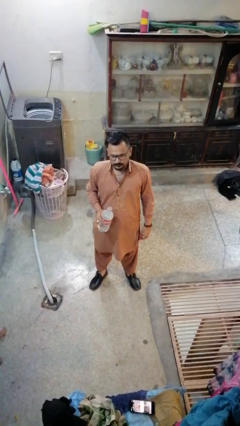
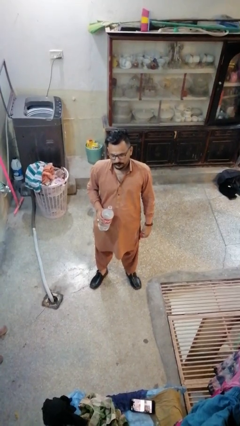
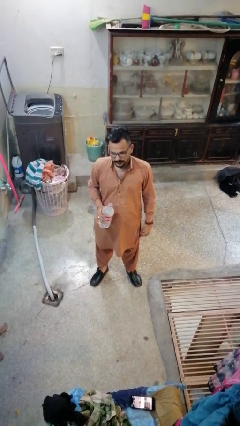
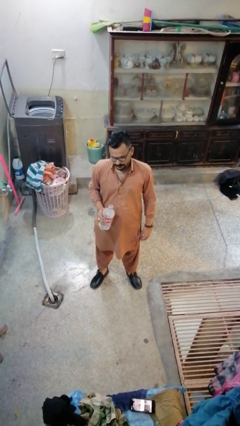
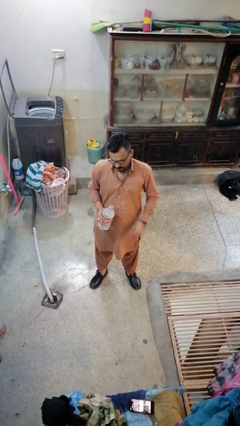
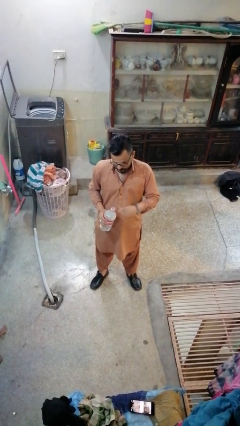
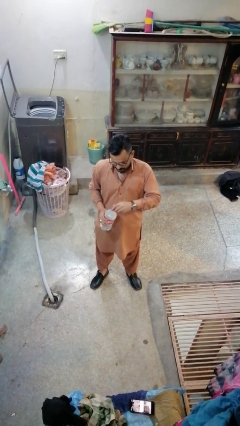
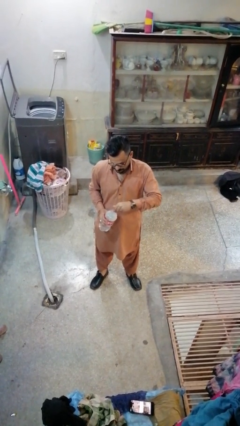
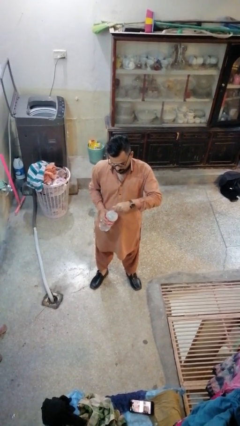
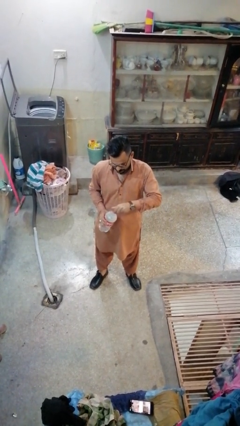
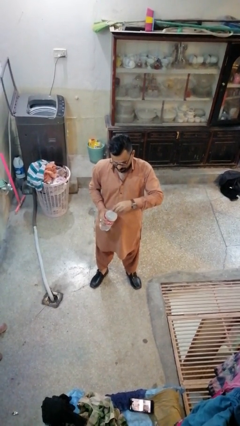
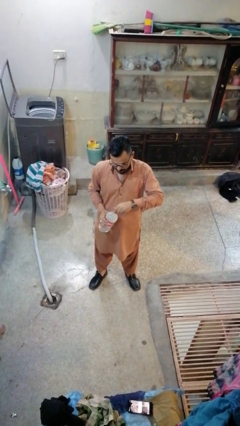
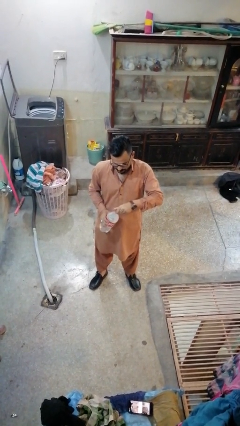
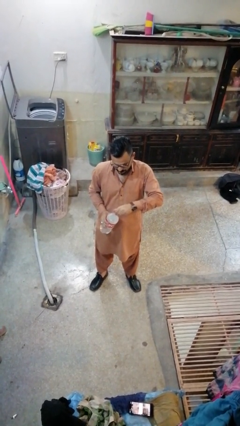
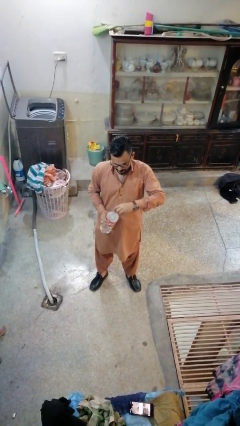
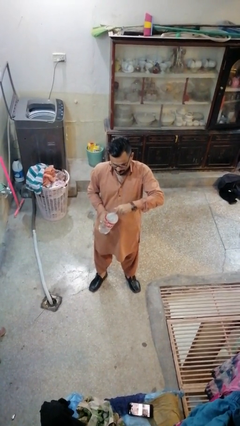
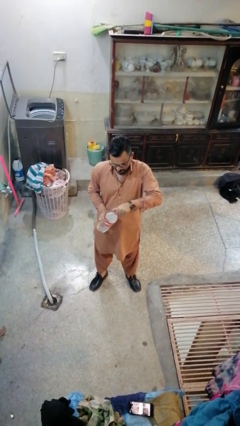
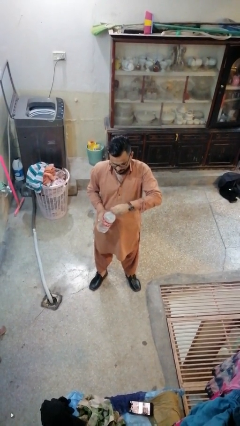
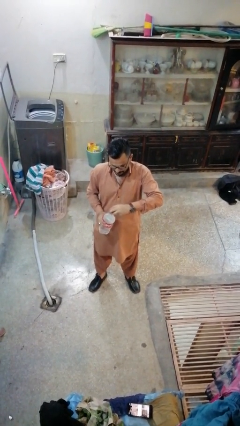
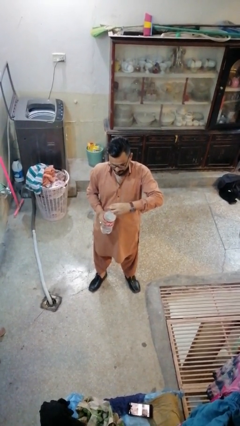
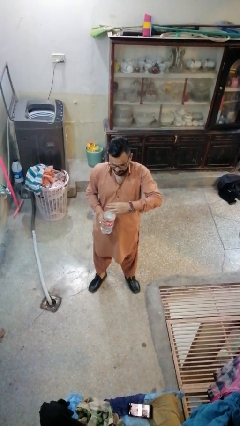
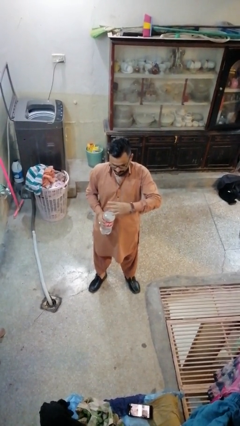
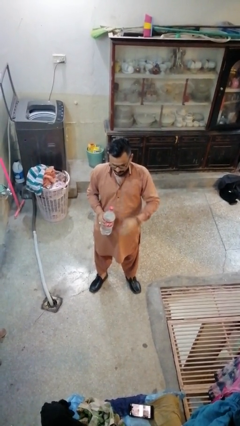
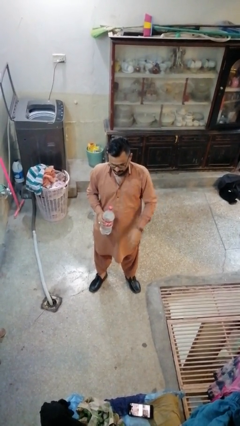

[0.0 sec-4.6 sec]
person screws lid to bottle

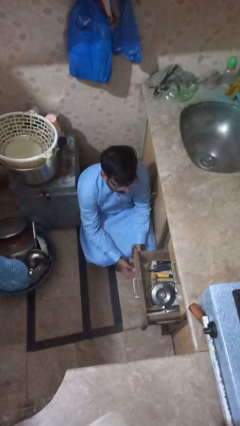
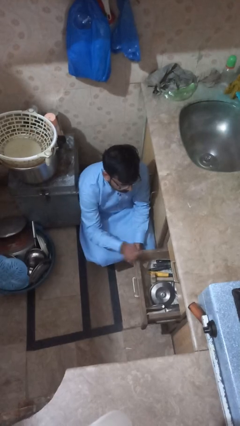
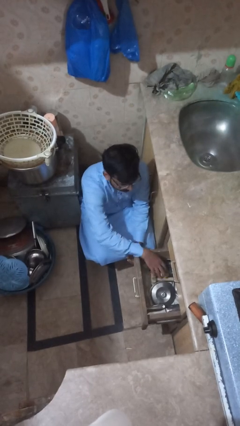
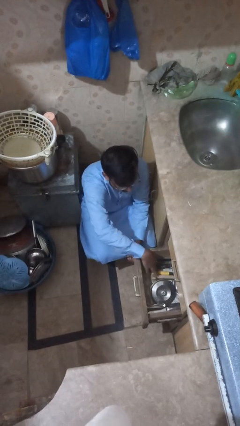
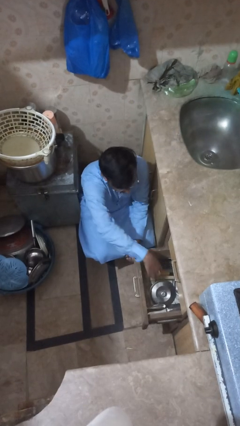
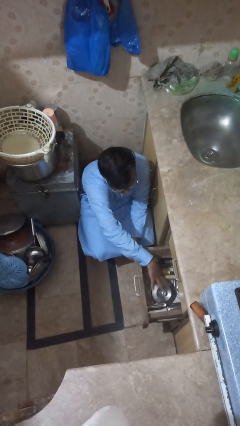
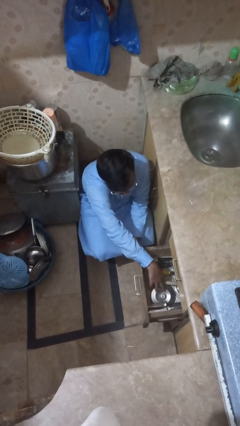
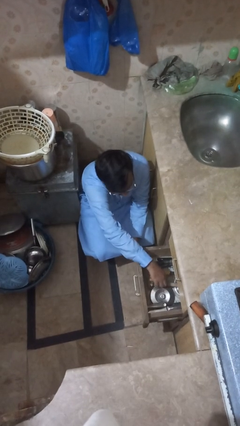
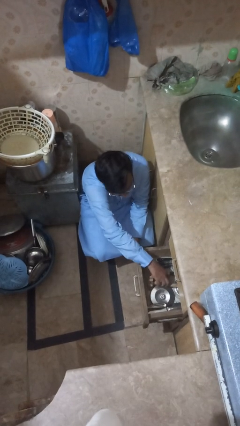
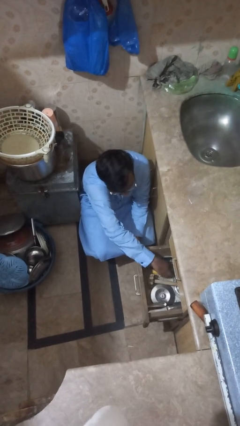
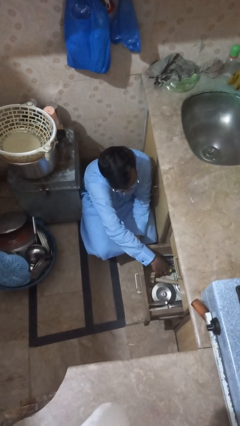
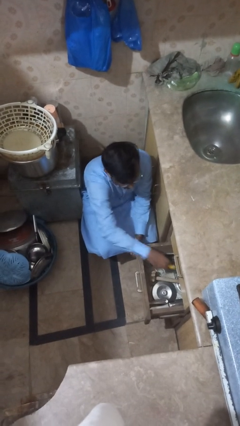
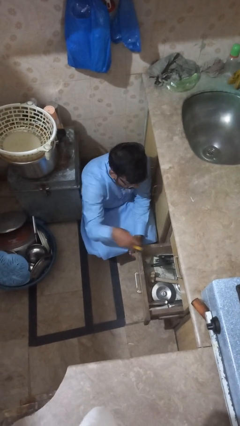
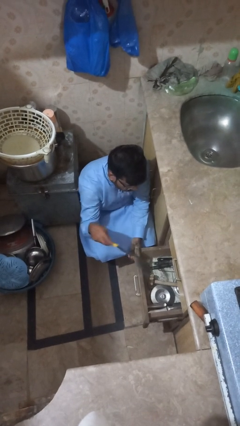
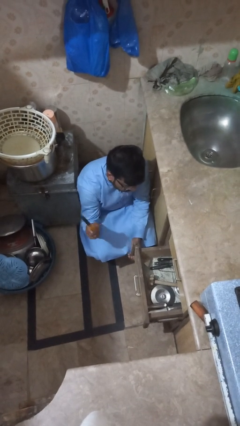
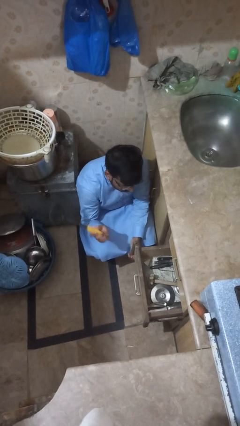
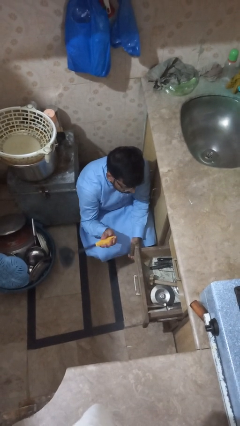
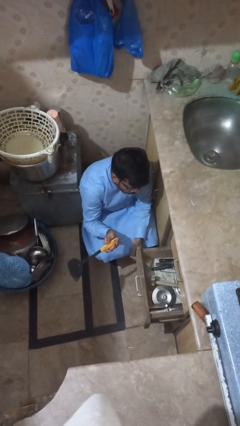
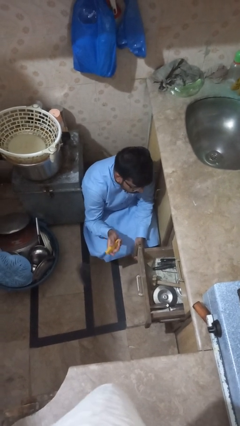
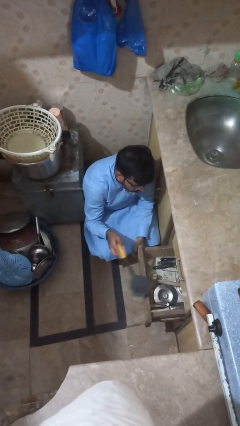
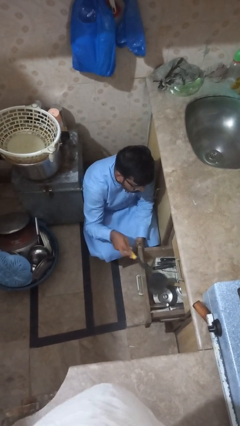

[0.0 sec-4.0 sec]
person searches in kitchen drawer

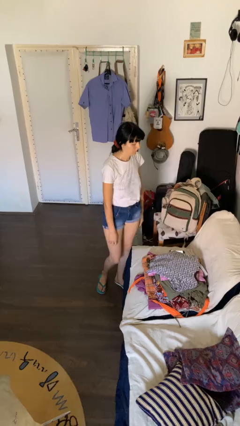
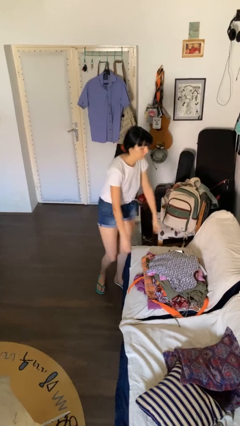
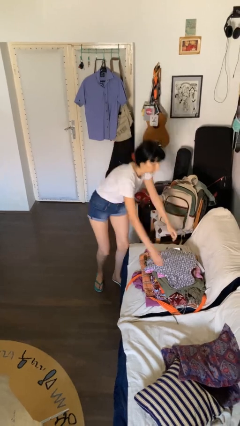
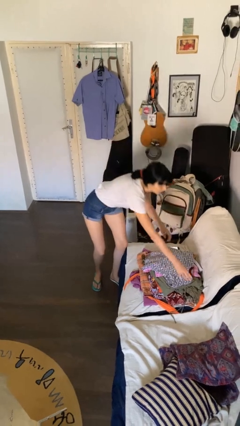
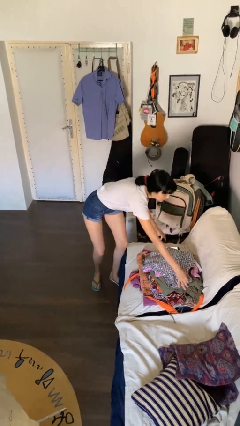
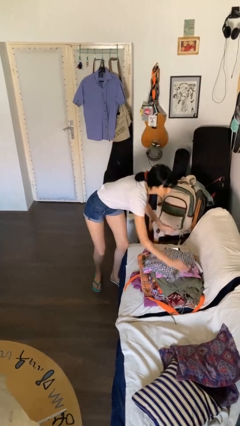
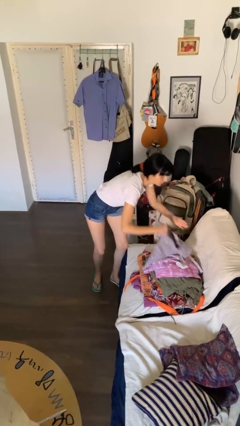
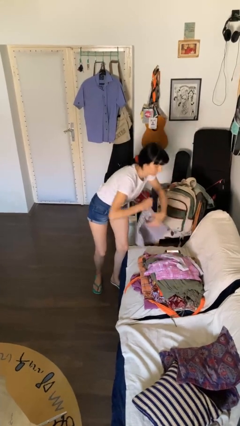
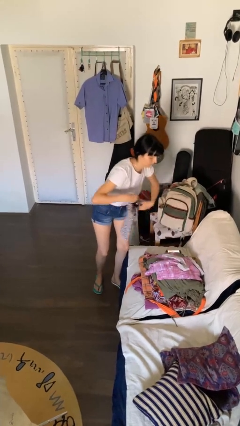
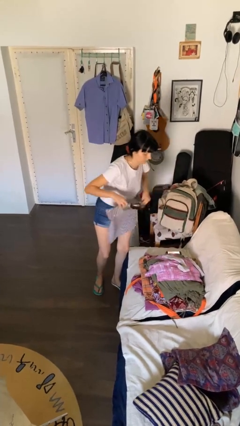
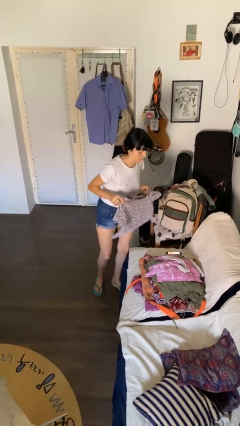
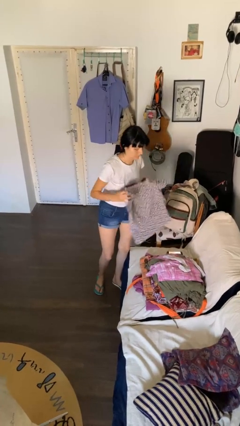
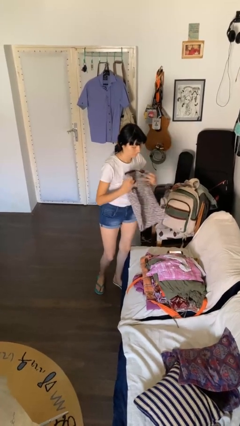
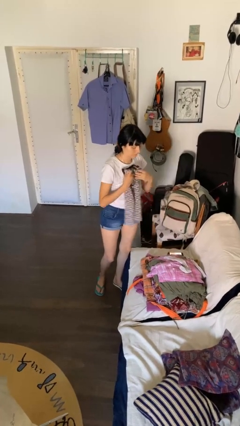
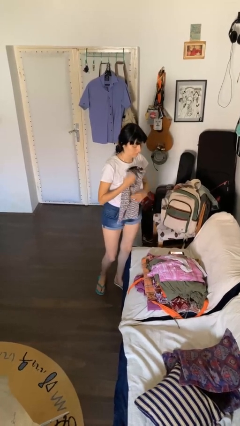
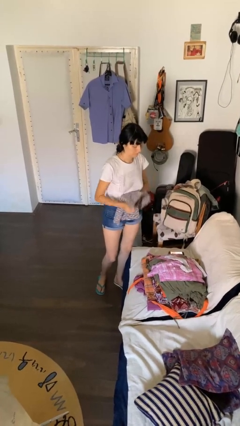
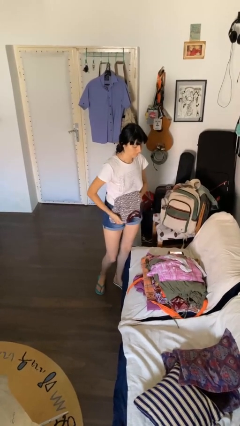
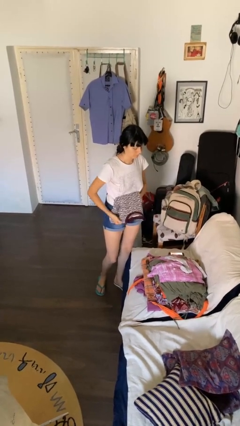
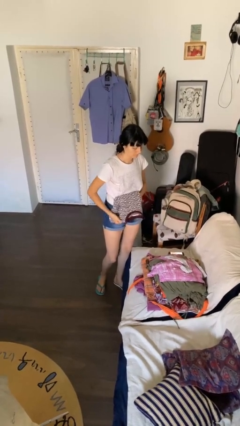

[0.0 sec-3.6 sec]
person folds shirt

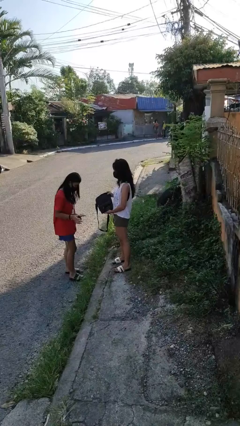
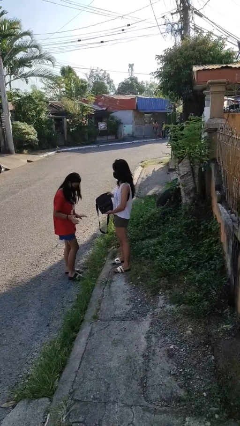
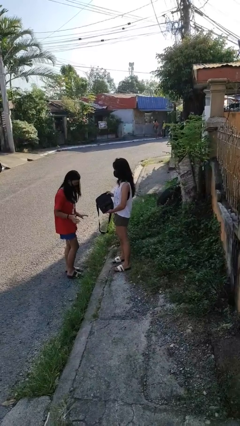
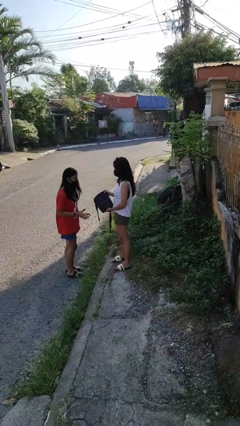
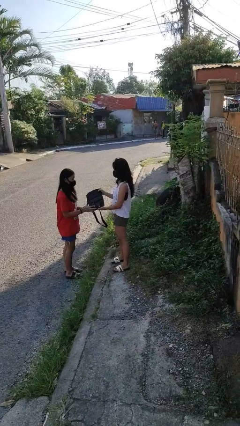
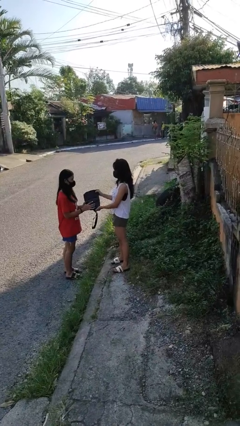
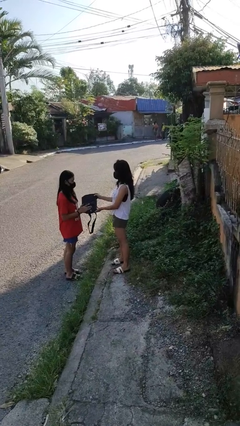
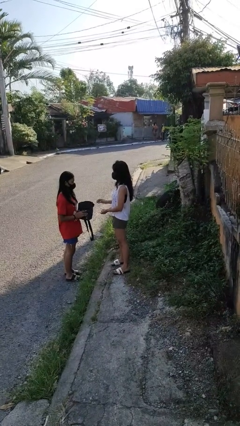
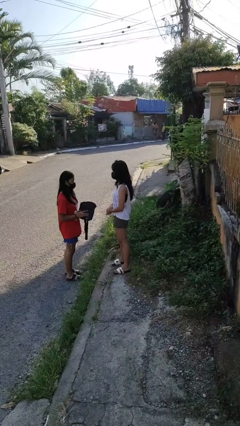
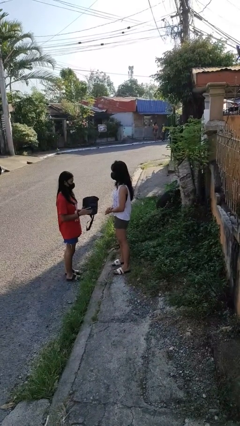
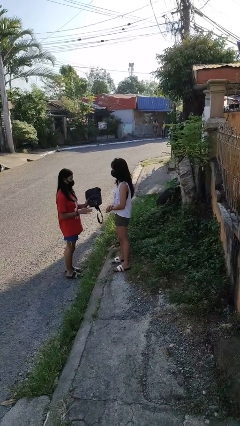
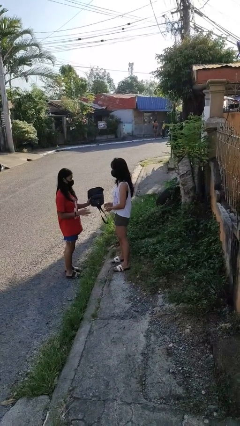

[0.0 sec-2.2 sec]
person transfers object to person

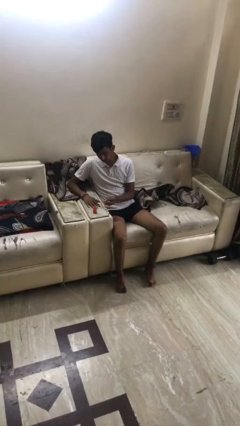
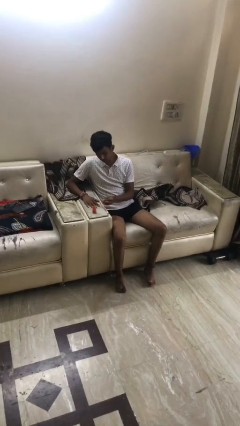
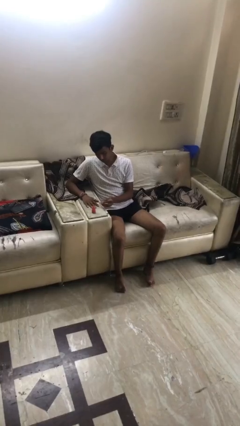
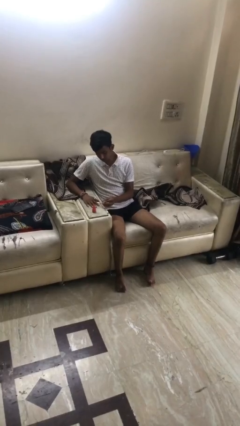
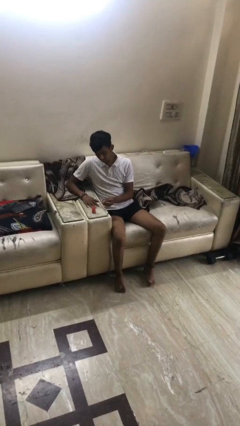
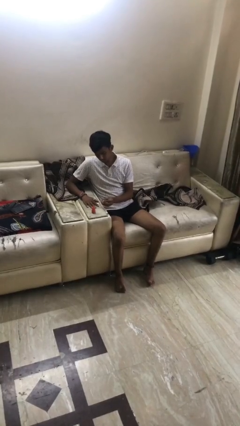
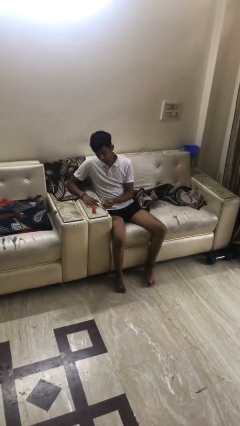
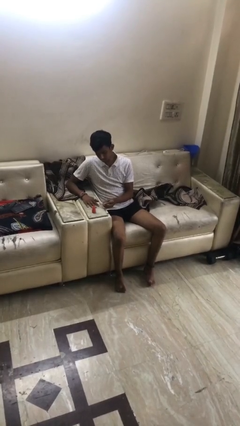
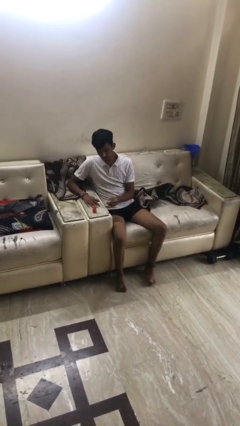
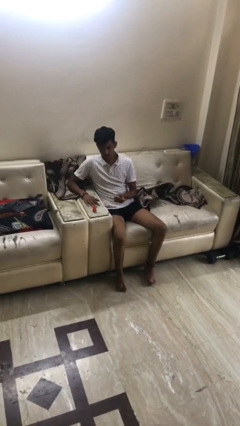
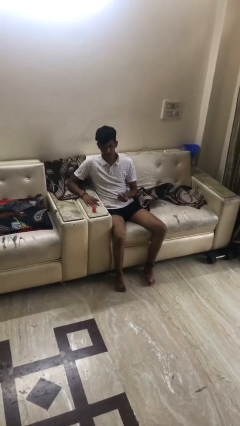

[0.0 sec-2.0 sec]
person paints fingernails

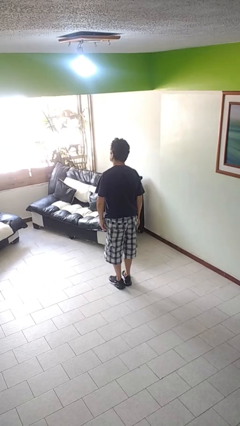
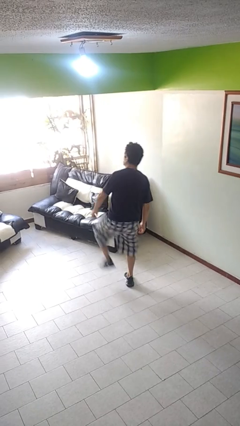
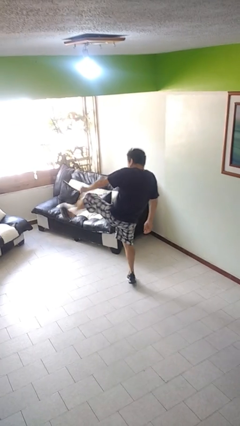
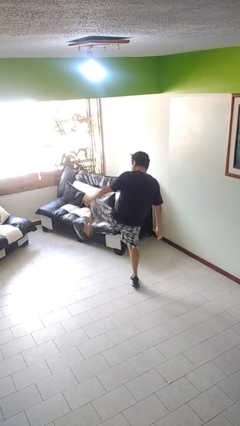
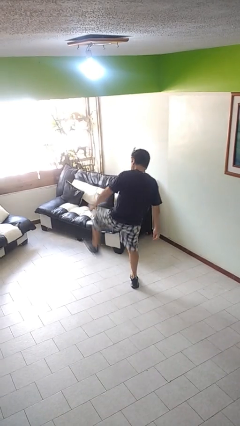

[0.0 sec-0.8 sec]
person karate kicks
